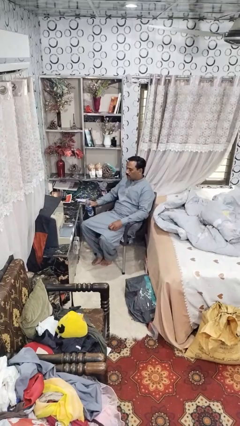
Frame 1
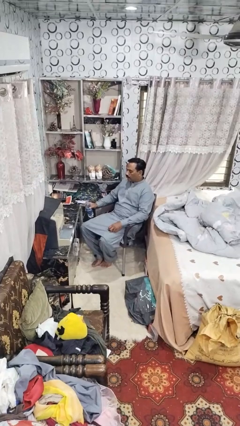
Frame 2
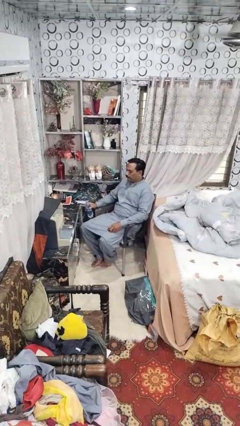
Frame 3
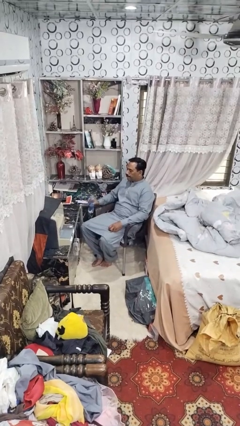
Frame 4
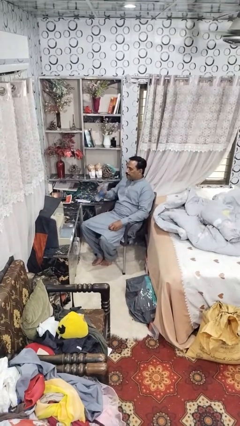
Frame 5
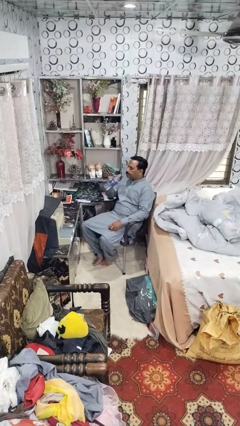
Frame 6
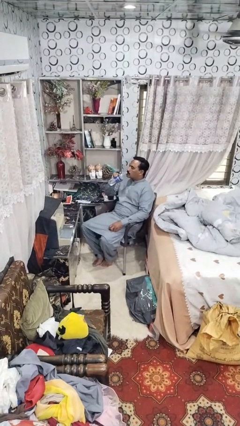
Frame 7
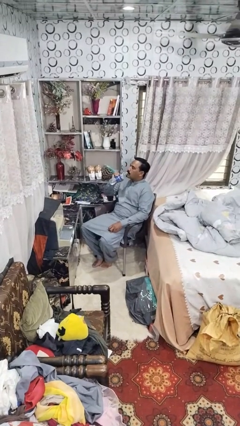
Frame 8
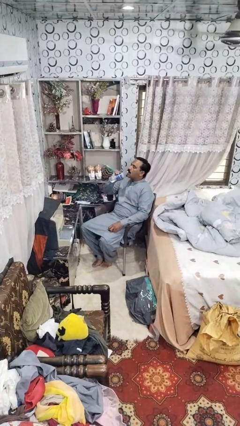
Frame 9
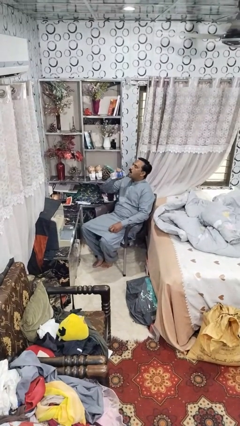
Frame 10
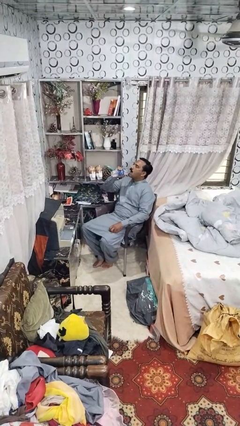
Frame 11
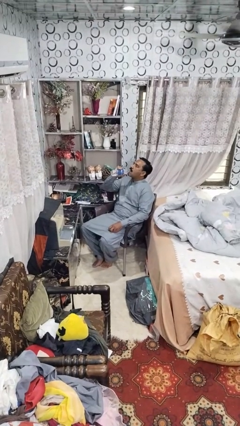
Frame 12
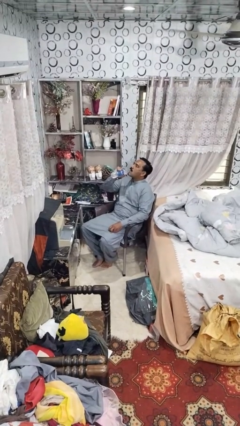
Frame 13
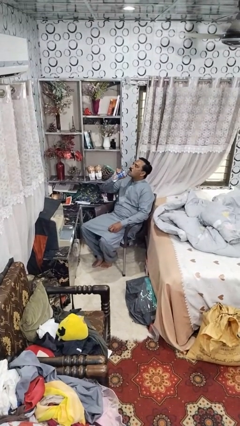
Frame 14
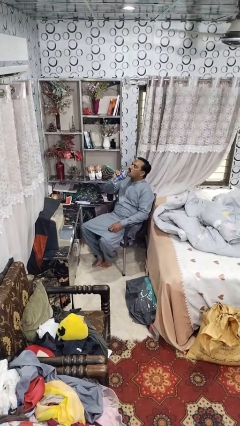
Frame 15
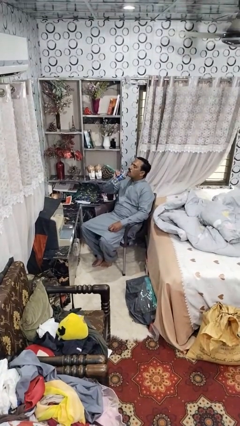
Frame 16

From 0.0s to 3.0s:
person drinks from bottle

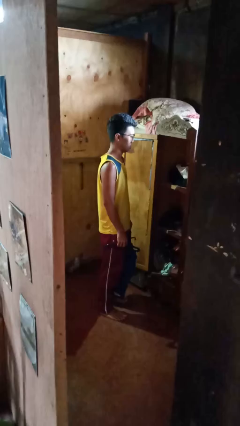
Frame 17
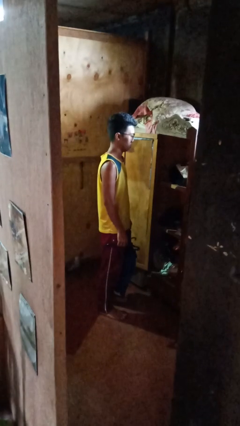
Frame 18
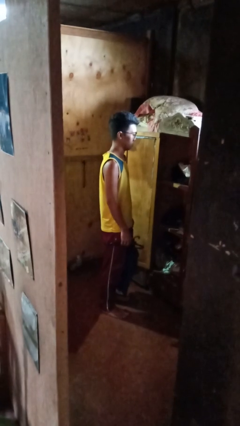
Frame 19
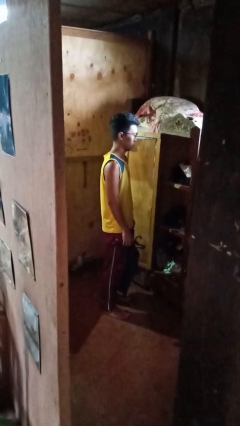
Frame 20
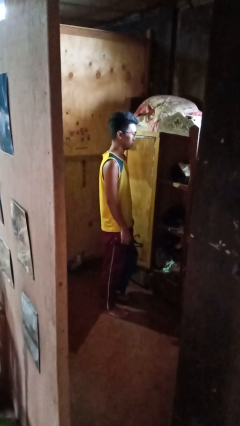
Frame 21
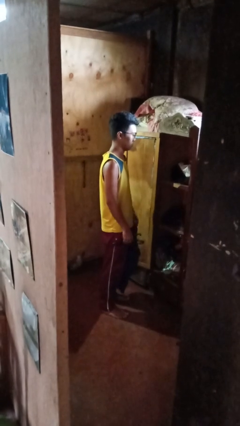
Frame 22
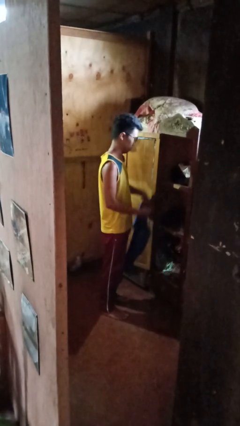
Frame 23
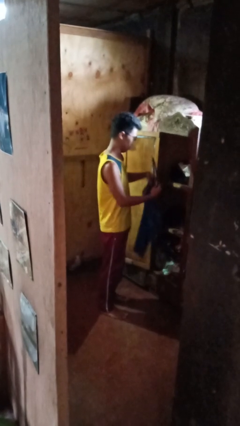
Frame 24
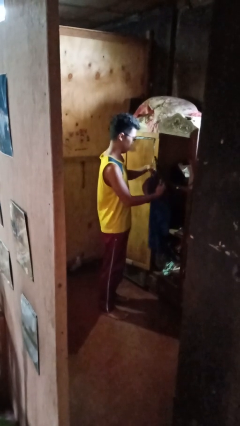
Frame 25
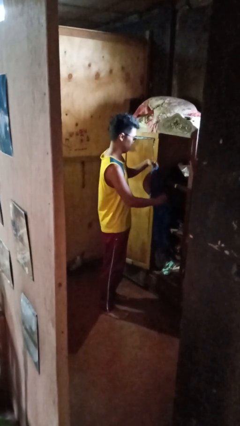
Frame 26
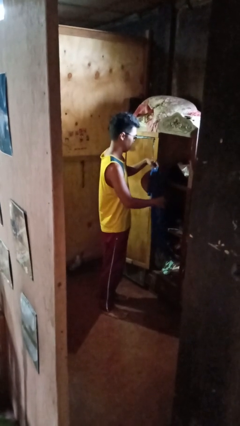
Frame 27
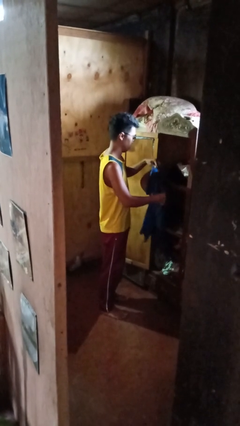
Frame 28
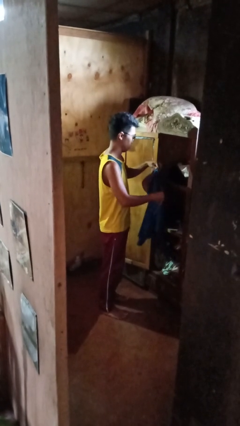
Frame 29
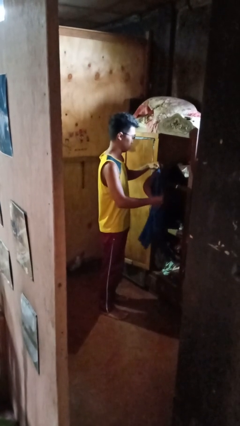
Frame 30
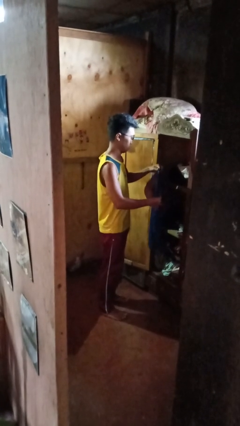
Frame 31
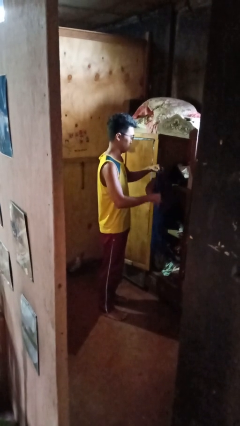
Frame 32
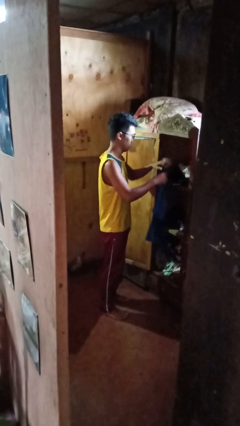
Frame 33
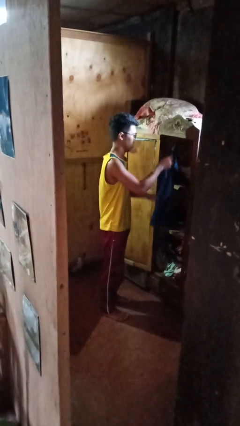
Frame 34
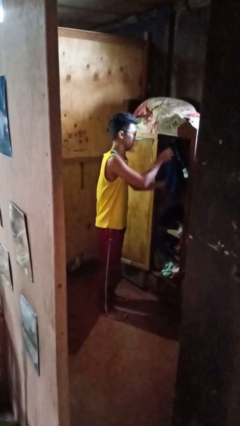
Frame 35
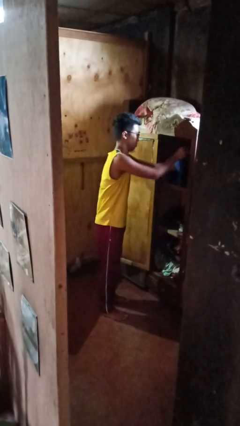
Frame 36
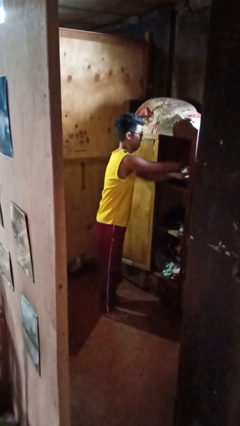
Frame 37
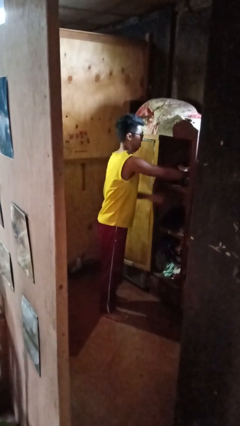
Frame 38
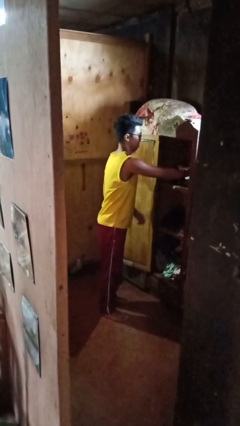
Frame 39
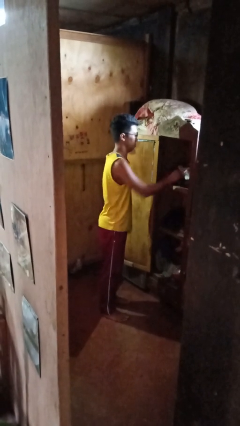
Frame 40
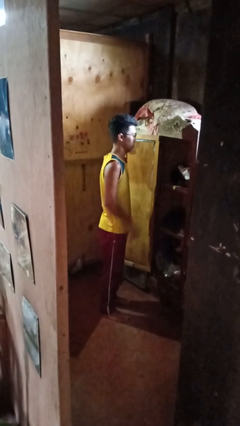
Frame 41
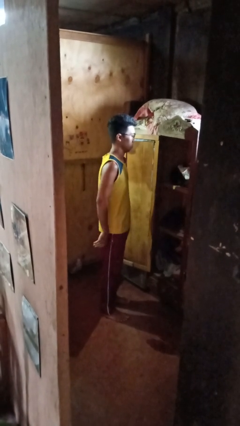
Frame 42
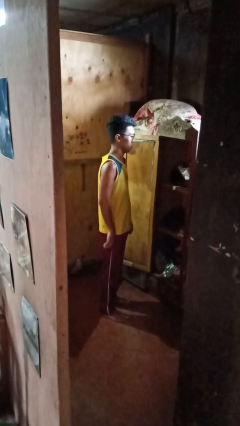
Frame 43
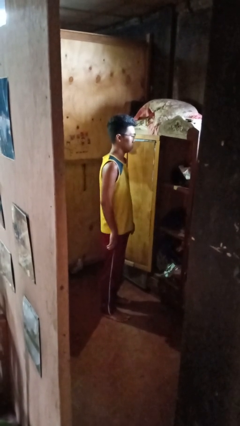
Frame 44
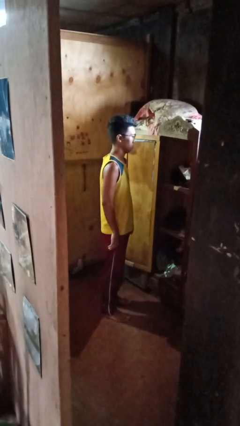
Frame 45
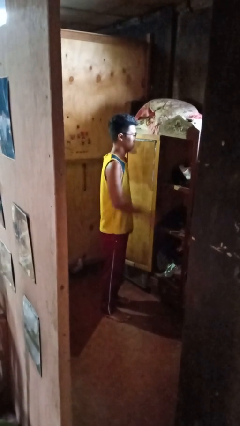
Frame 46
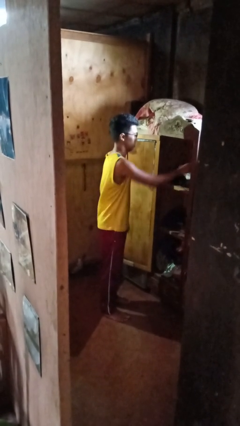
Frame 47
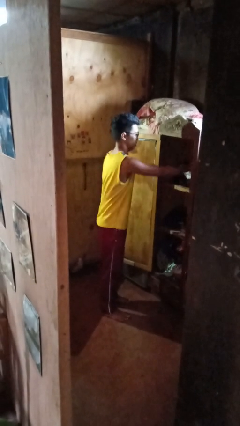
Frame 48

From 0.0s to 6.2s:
person puts clothes into closet

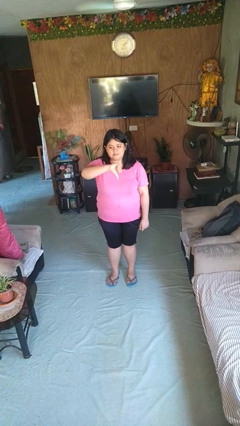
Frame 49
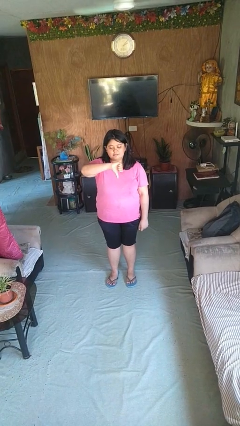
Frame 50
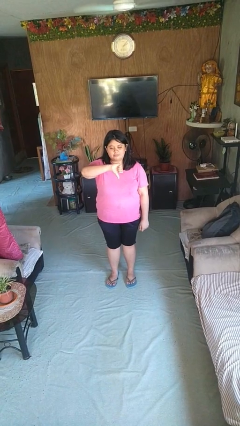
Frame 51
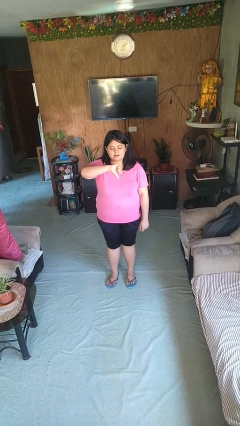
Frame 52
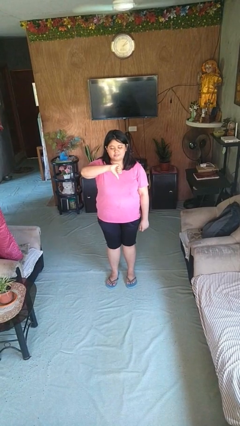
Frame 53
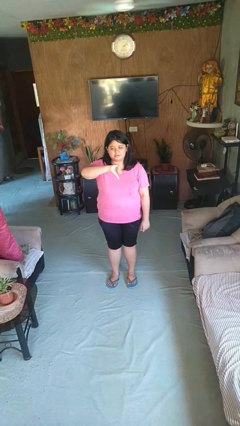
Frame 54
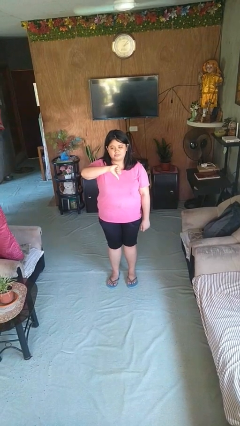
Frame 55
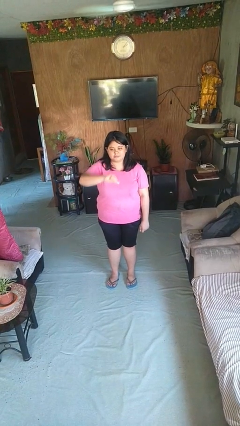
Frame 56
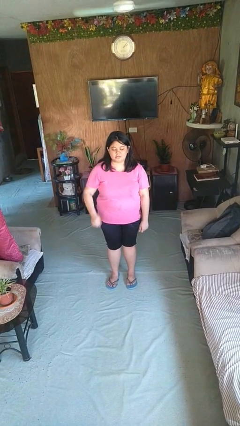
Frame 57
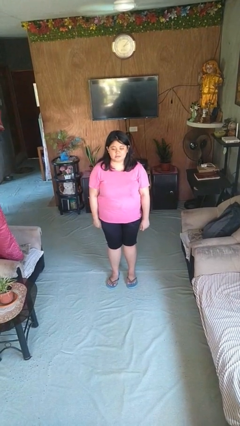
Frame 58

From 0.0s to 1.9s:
person gestures thumbs down

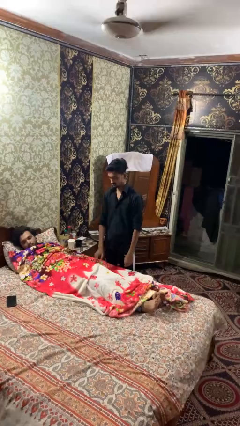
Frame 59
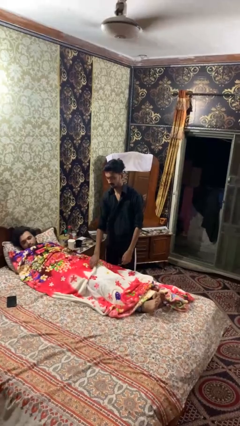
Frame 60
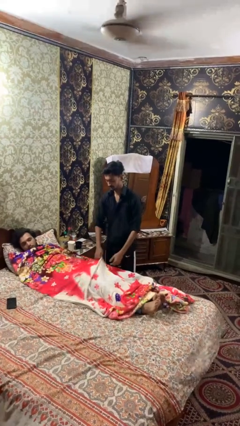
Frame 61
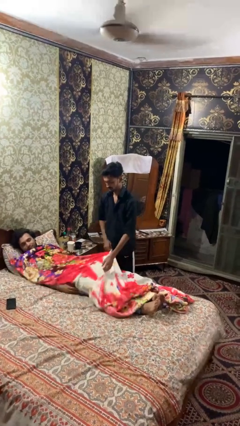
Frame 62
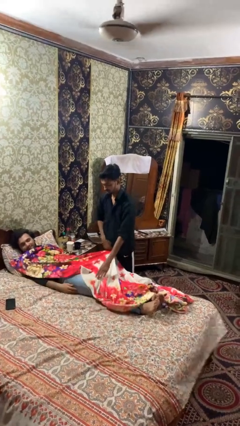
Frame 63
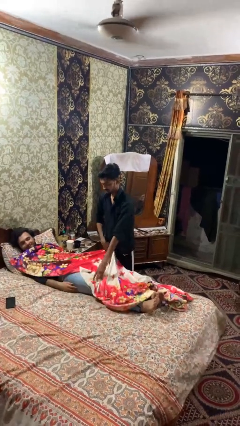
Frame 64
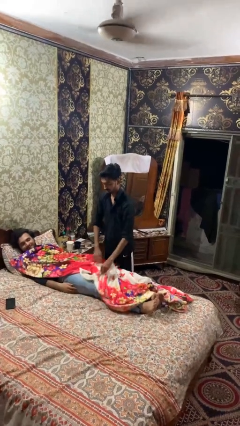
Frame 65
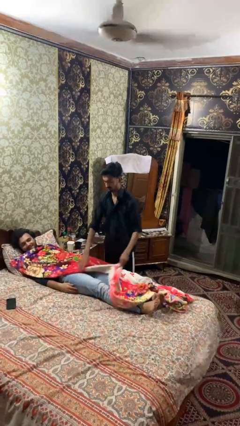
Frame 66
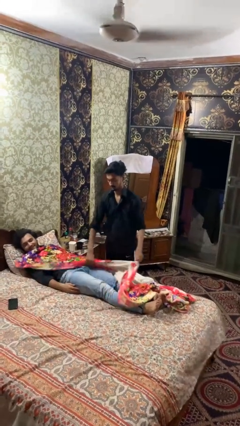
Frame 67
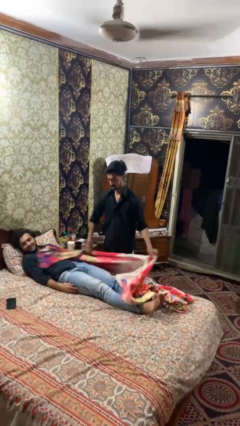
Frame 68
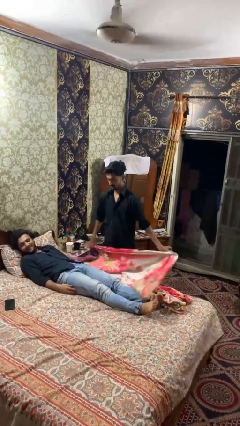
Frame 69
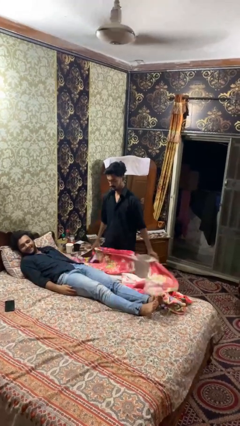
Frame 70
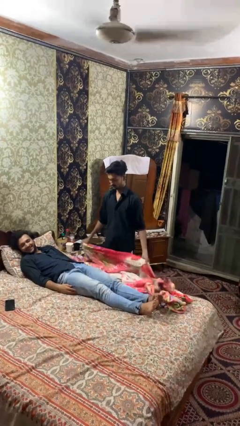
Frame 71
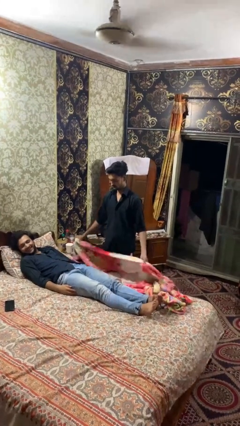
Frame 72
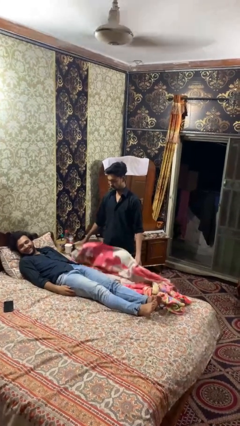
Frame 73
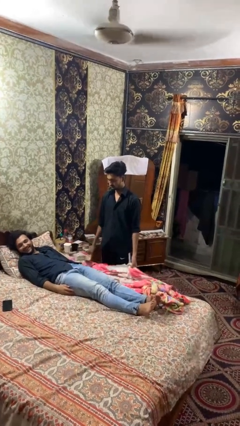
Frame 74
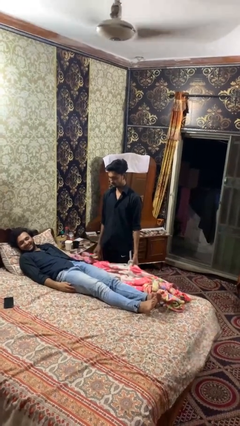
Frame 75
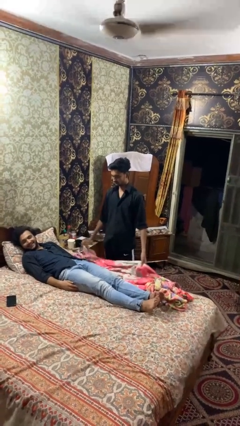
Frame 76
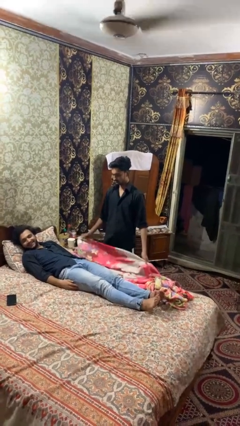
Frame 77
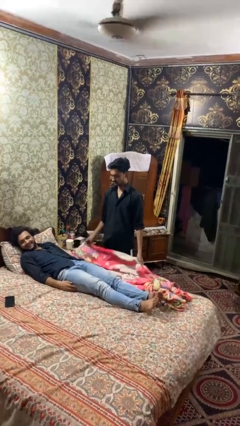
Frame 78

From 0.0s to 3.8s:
person uncovers friend with blanket

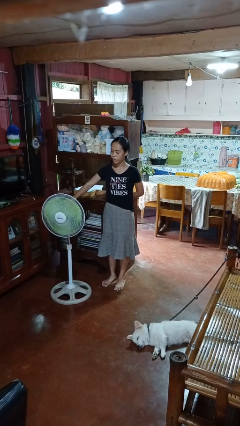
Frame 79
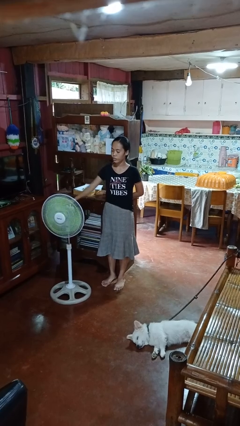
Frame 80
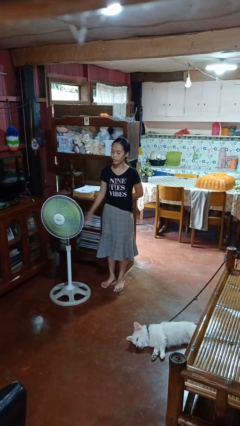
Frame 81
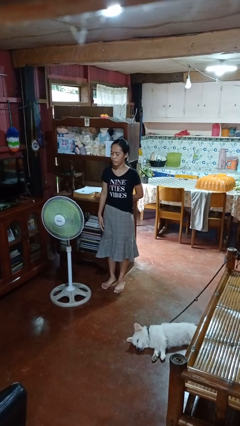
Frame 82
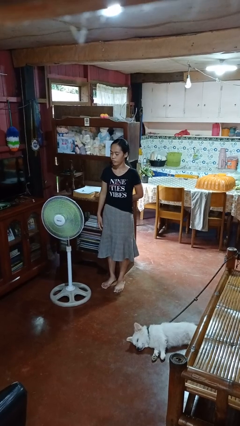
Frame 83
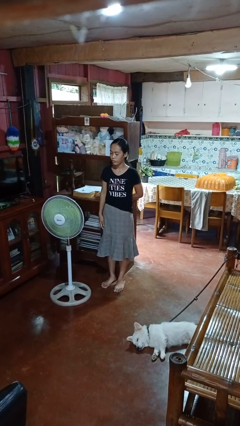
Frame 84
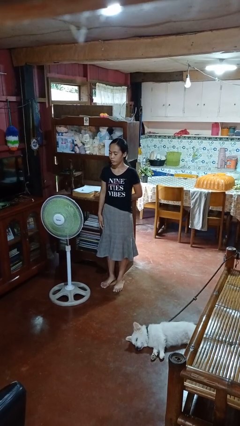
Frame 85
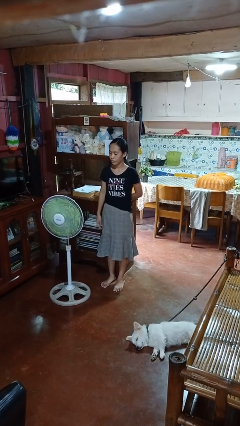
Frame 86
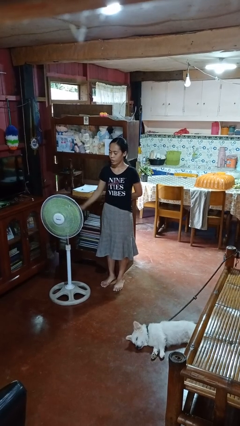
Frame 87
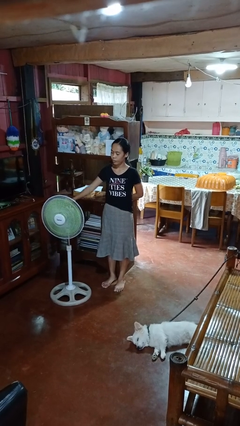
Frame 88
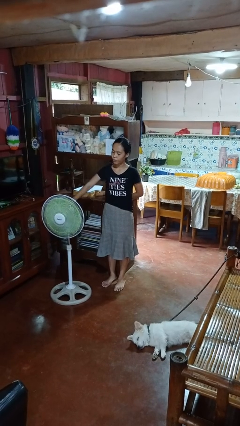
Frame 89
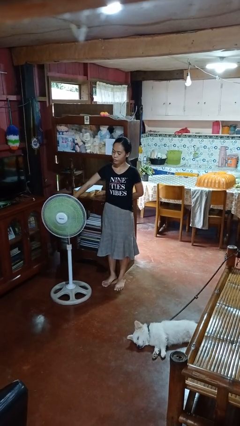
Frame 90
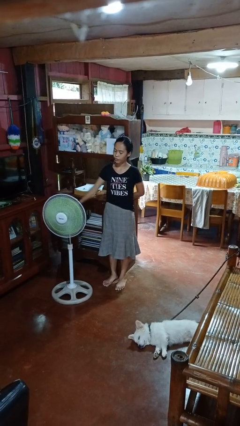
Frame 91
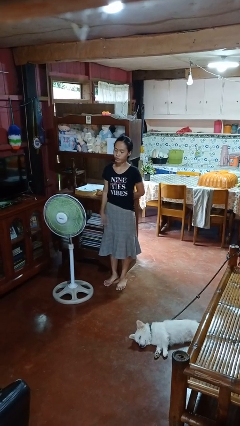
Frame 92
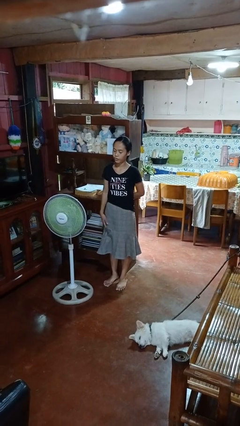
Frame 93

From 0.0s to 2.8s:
person turns on fan
